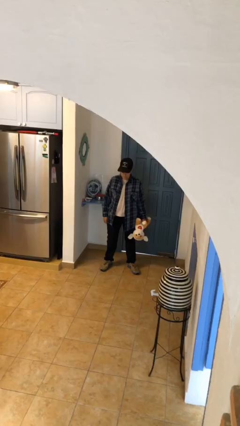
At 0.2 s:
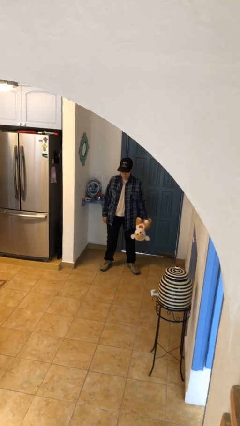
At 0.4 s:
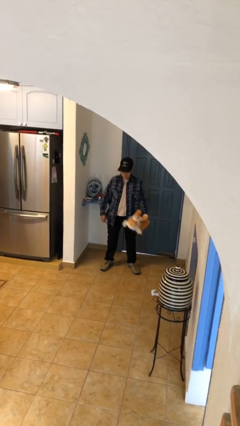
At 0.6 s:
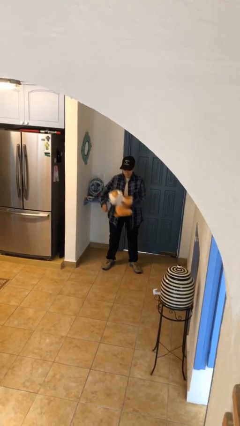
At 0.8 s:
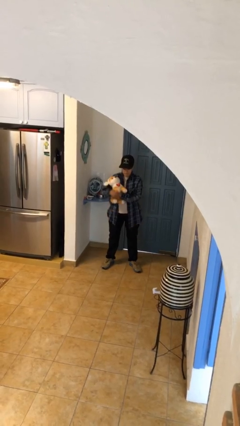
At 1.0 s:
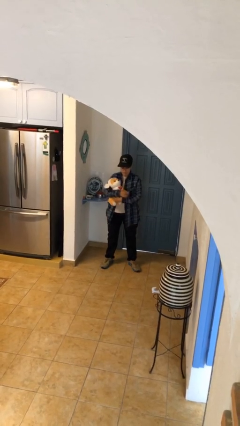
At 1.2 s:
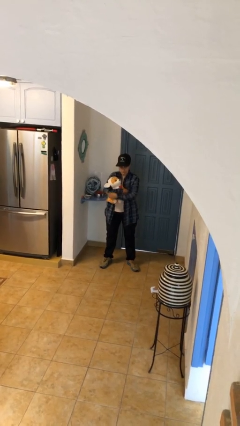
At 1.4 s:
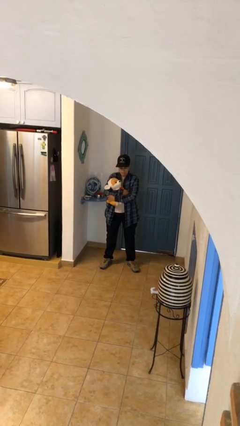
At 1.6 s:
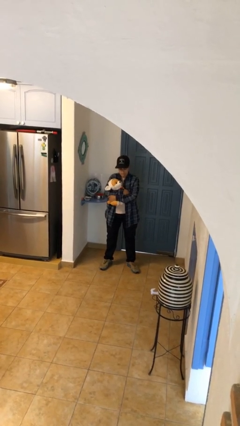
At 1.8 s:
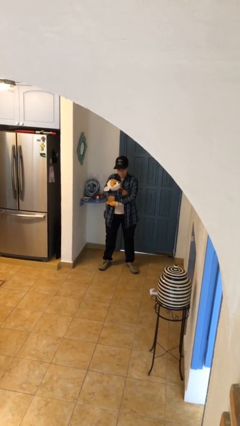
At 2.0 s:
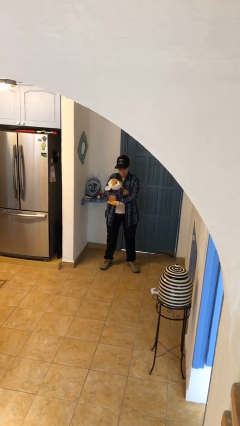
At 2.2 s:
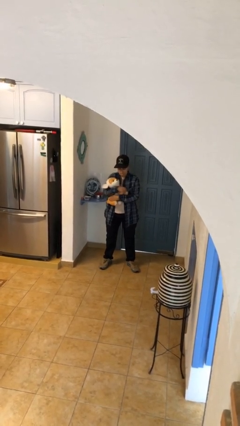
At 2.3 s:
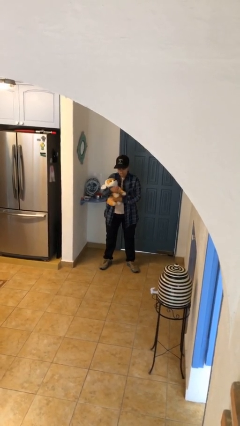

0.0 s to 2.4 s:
person hugs stuffed animal

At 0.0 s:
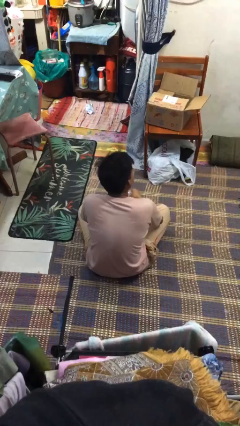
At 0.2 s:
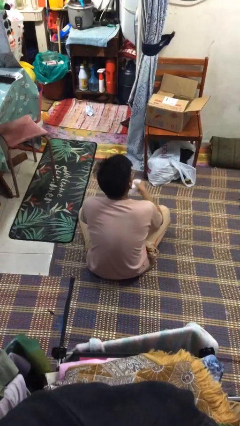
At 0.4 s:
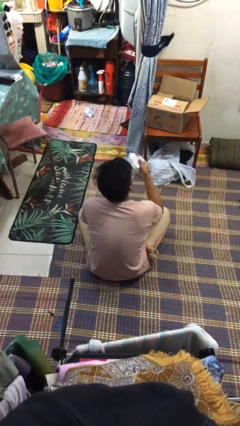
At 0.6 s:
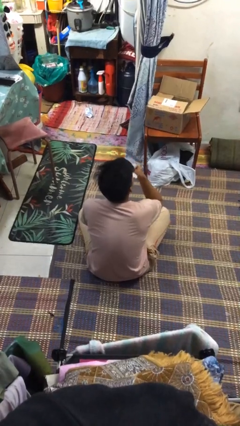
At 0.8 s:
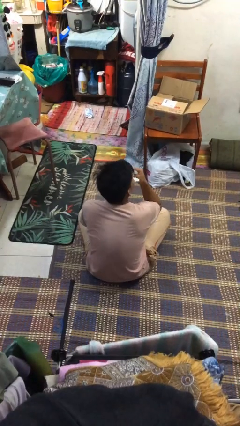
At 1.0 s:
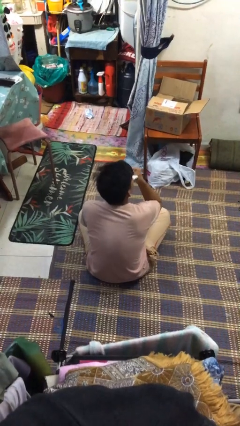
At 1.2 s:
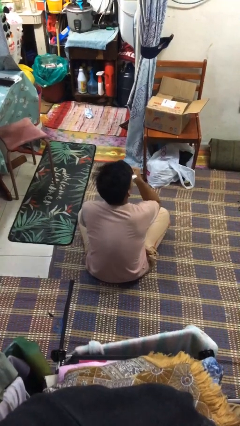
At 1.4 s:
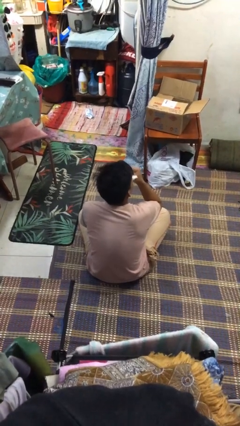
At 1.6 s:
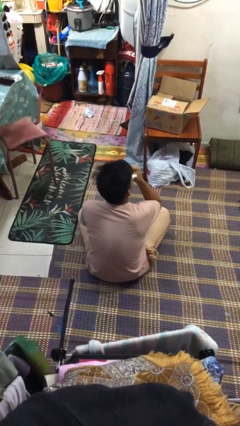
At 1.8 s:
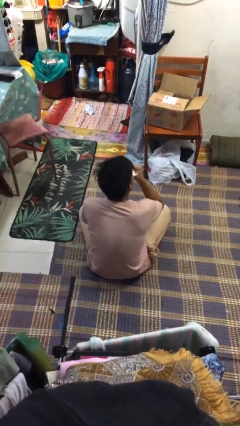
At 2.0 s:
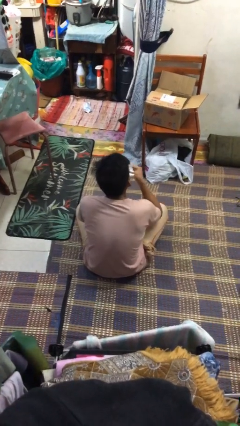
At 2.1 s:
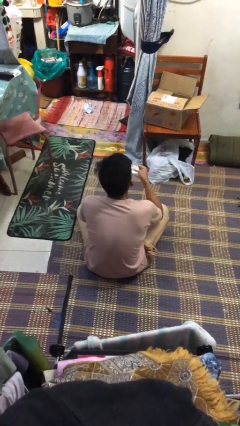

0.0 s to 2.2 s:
person blows nose

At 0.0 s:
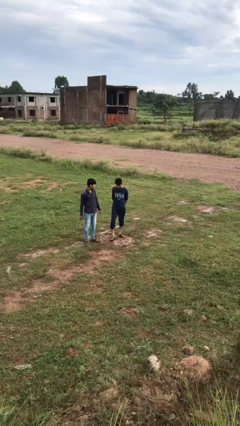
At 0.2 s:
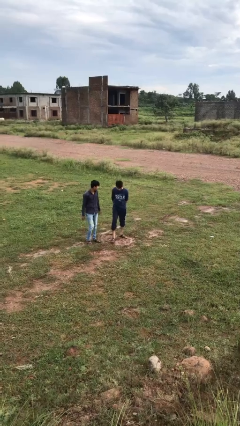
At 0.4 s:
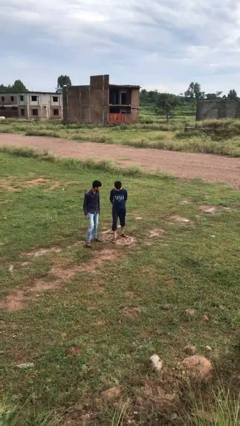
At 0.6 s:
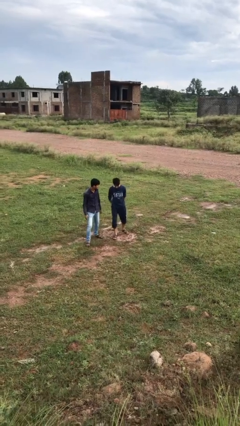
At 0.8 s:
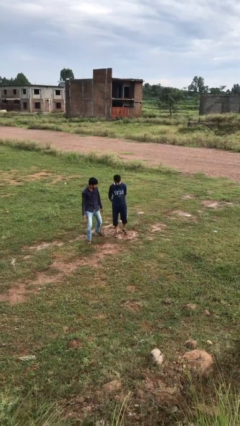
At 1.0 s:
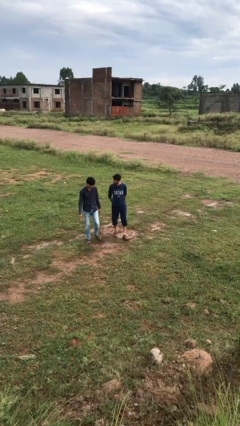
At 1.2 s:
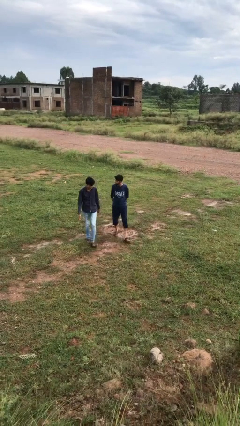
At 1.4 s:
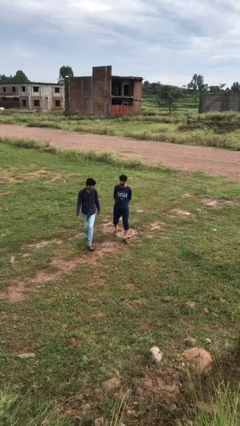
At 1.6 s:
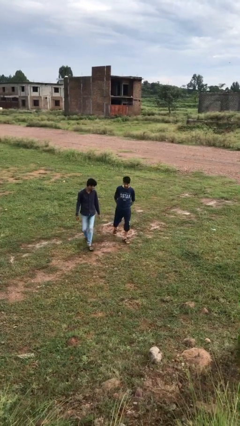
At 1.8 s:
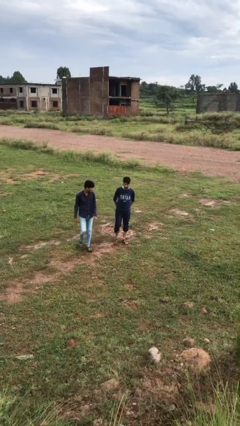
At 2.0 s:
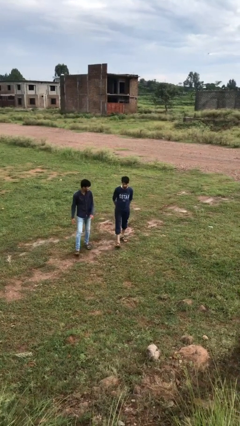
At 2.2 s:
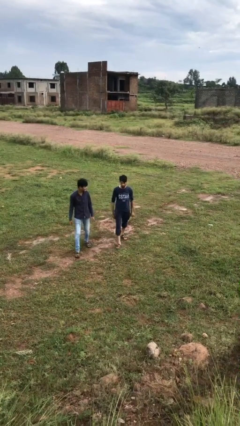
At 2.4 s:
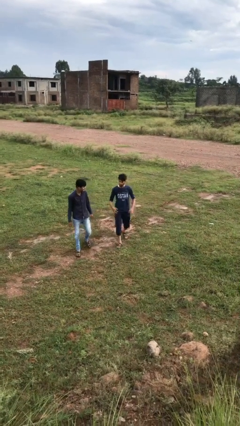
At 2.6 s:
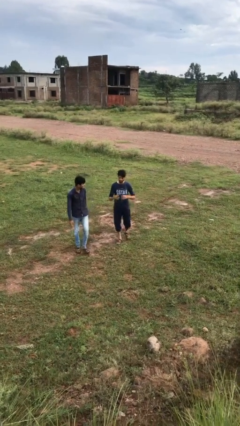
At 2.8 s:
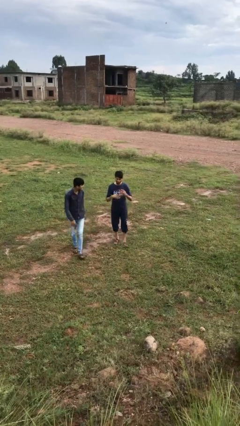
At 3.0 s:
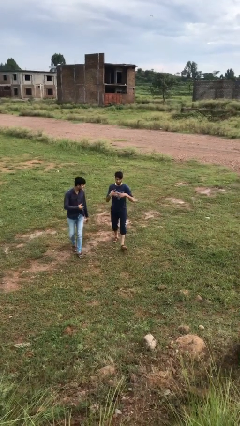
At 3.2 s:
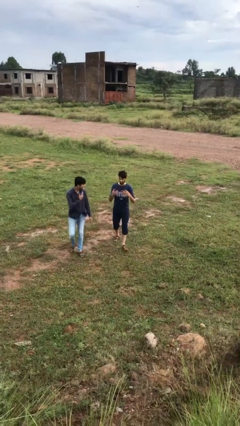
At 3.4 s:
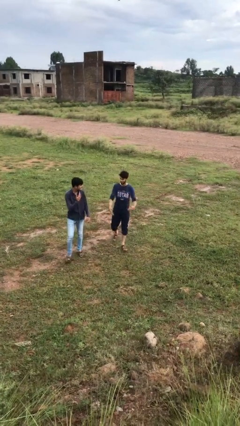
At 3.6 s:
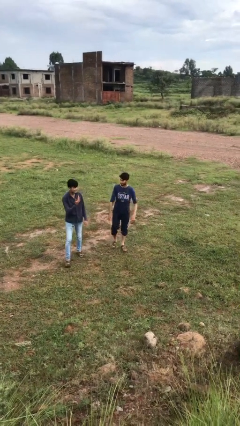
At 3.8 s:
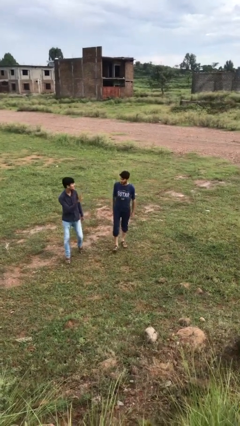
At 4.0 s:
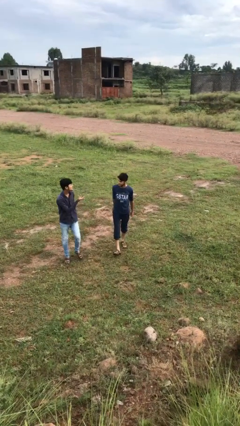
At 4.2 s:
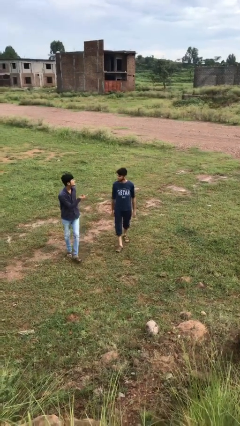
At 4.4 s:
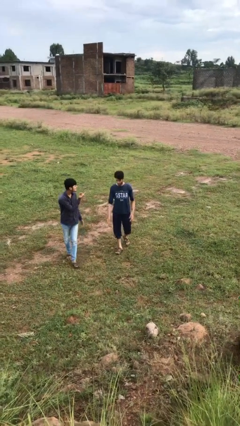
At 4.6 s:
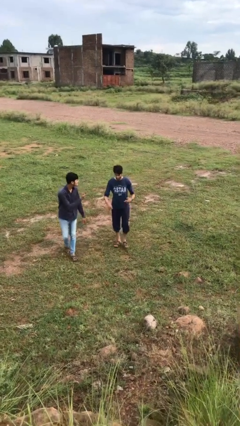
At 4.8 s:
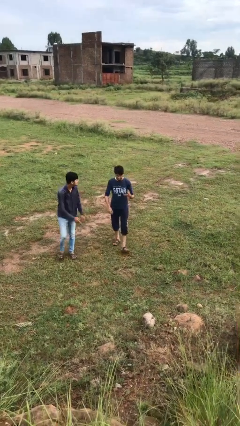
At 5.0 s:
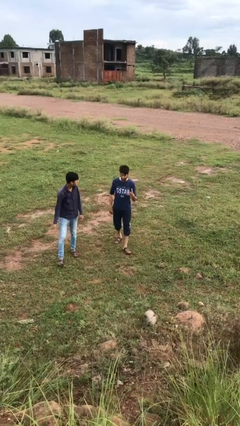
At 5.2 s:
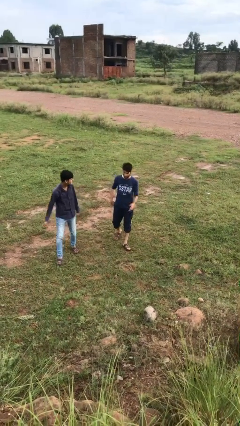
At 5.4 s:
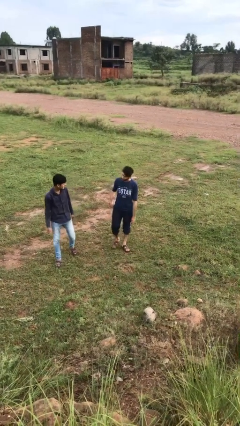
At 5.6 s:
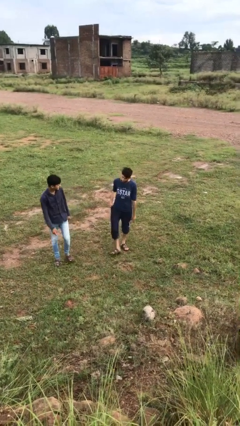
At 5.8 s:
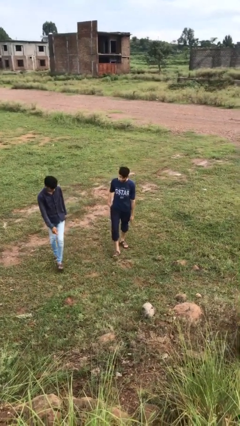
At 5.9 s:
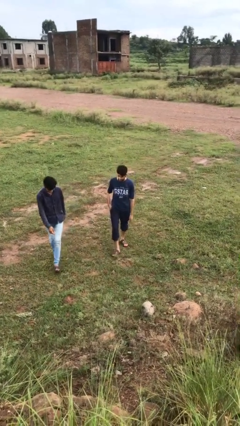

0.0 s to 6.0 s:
person talks to person

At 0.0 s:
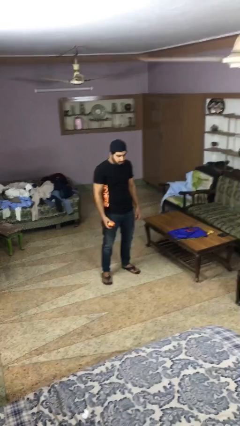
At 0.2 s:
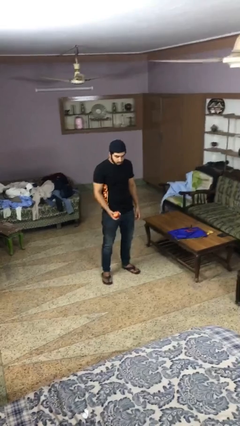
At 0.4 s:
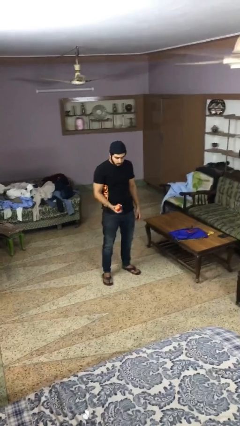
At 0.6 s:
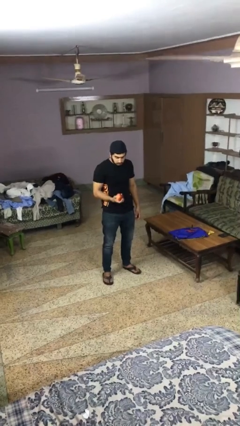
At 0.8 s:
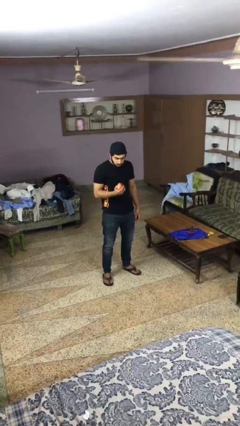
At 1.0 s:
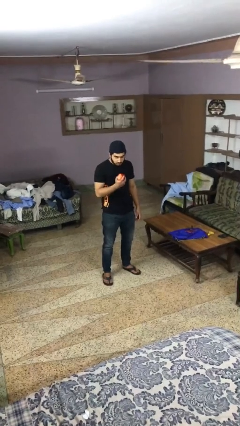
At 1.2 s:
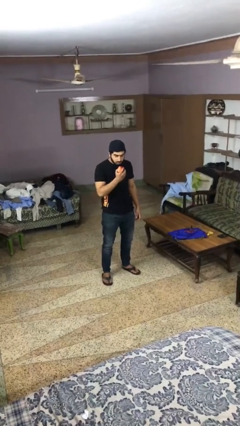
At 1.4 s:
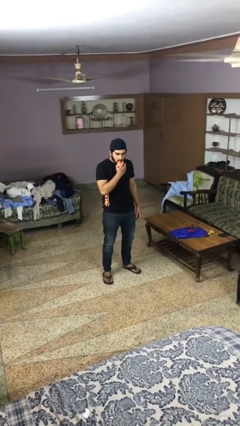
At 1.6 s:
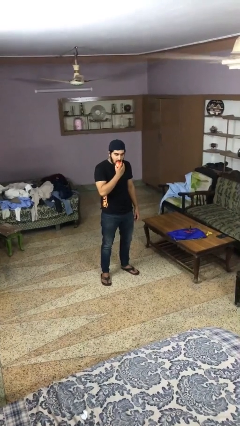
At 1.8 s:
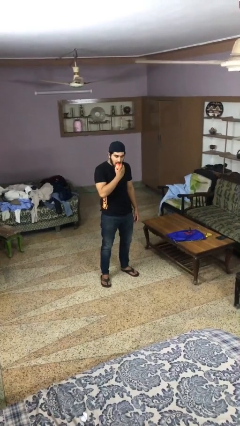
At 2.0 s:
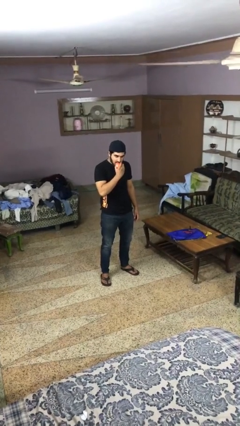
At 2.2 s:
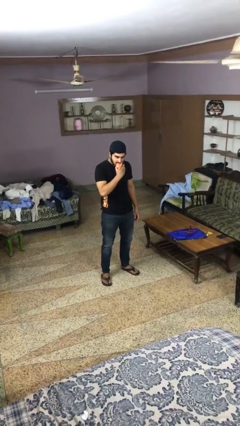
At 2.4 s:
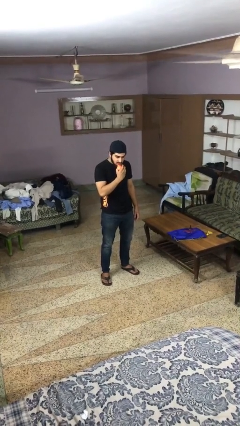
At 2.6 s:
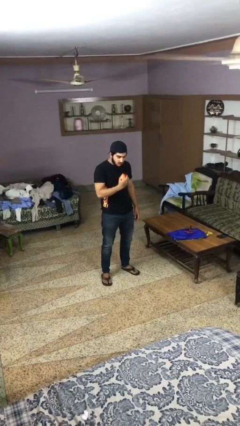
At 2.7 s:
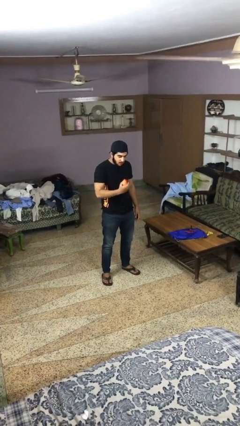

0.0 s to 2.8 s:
person eats apple

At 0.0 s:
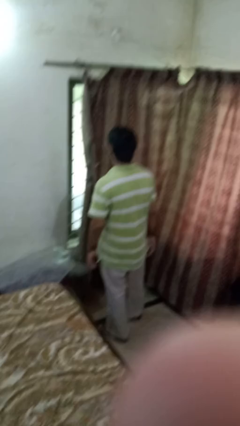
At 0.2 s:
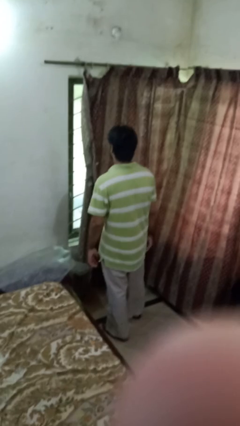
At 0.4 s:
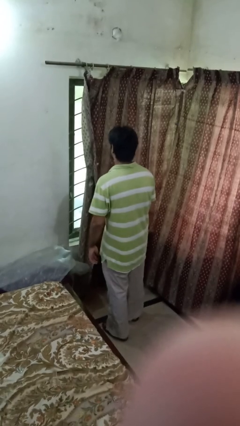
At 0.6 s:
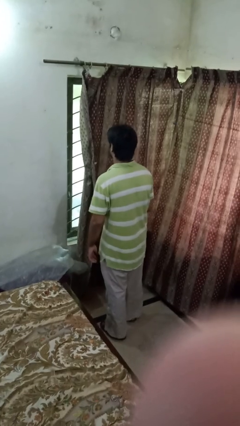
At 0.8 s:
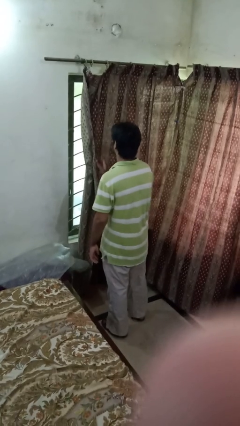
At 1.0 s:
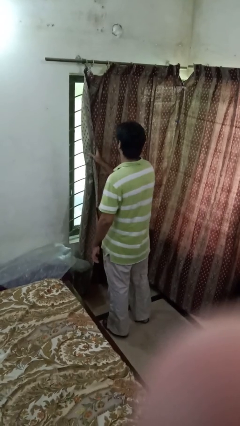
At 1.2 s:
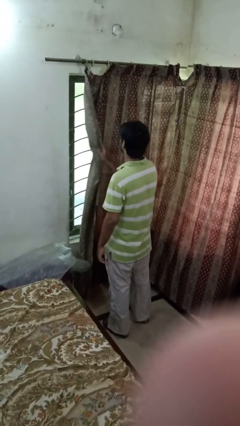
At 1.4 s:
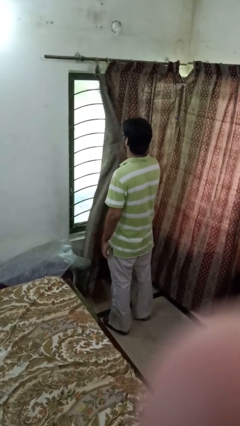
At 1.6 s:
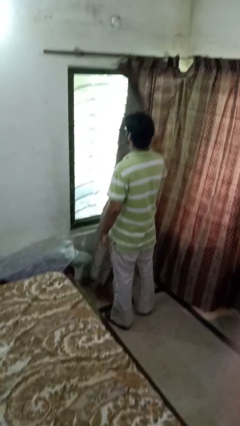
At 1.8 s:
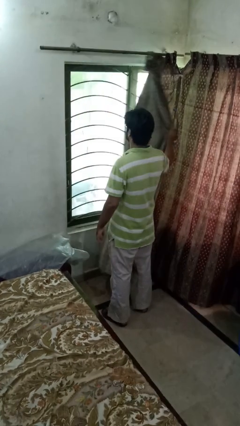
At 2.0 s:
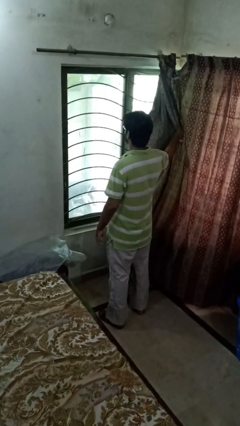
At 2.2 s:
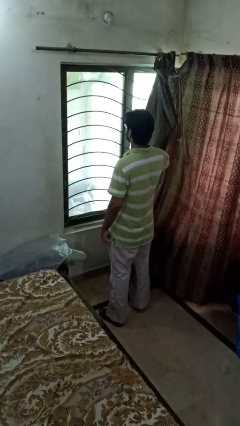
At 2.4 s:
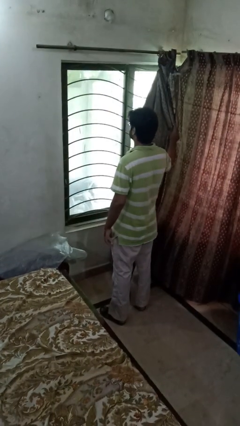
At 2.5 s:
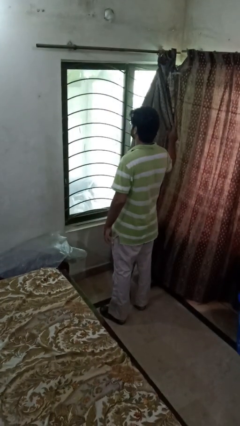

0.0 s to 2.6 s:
person opens curtains

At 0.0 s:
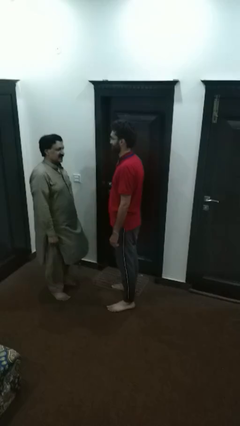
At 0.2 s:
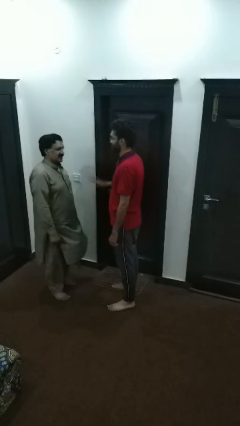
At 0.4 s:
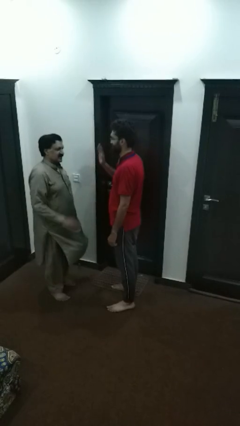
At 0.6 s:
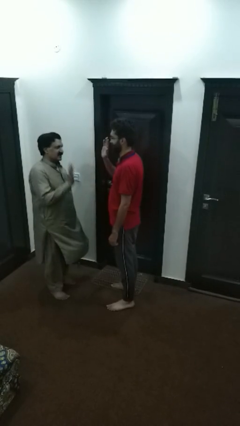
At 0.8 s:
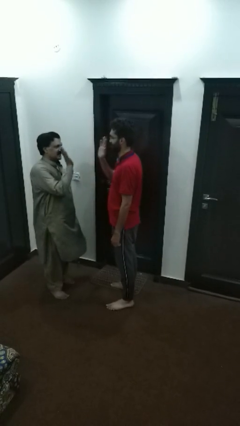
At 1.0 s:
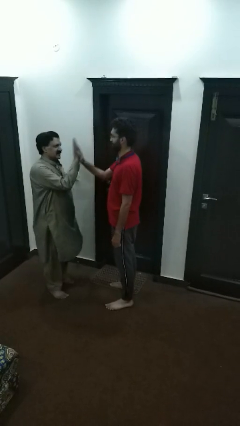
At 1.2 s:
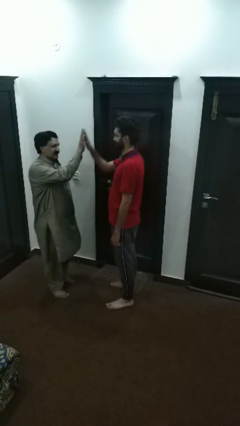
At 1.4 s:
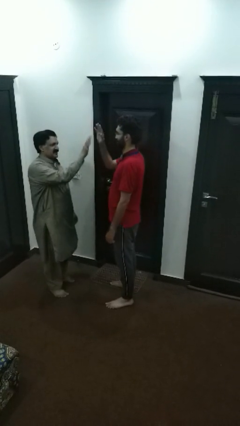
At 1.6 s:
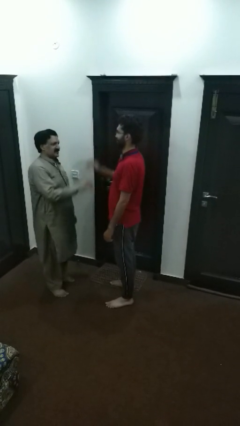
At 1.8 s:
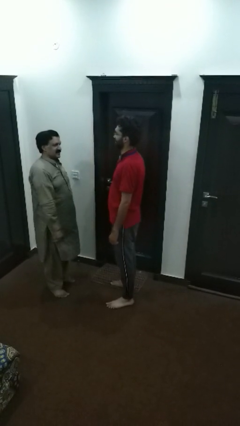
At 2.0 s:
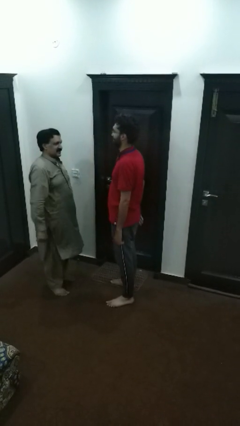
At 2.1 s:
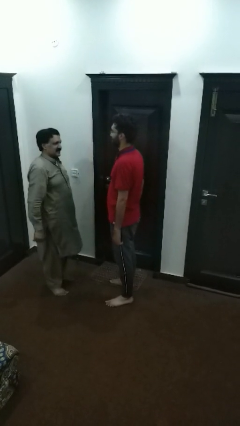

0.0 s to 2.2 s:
person highfives hand
